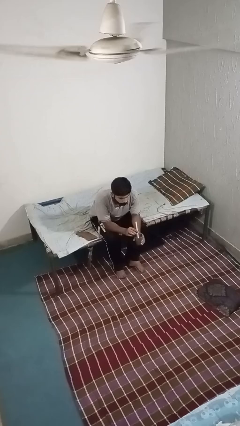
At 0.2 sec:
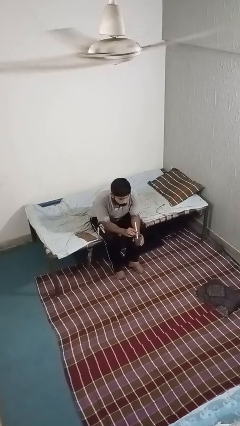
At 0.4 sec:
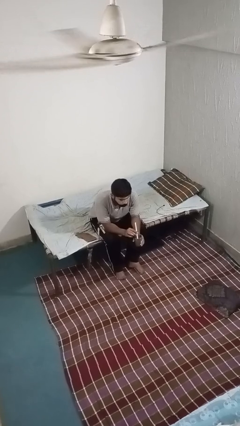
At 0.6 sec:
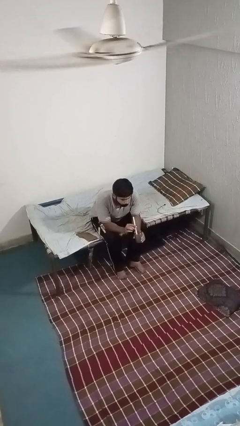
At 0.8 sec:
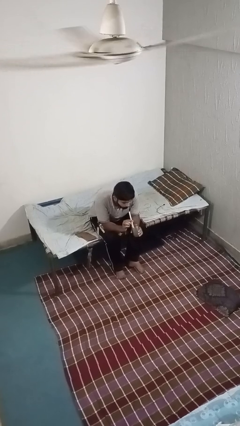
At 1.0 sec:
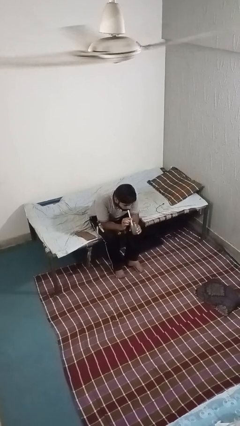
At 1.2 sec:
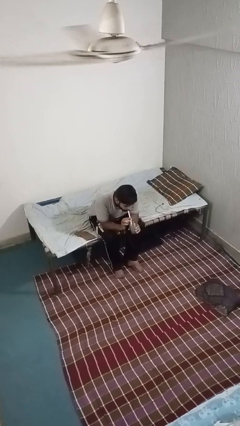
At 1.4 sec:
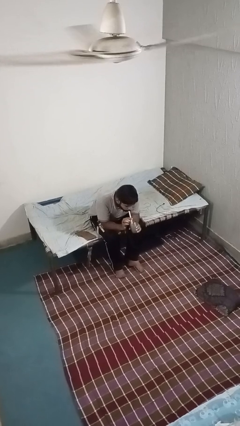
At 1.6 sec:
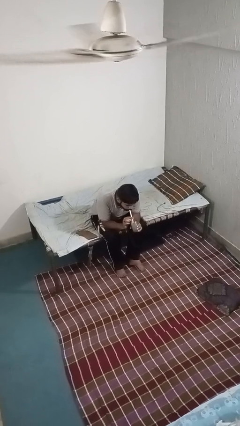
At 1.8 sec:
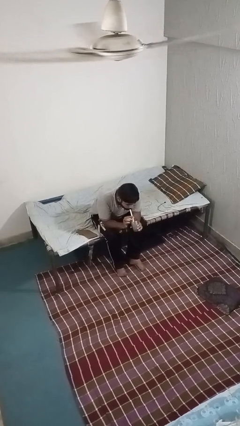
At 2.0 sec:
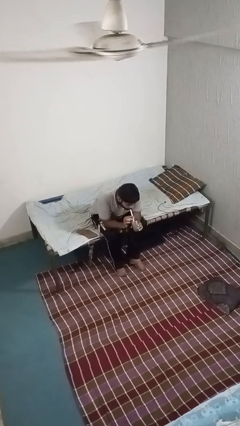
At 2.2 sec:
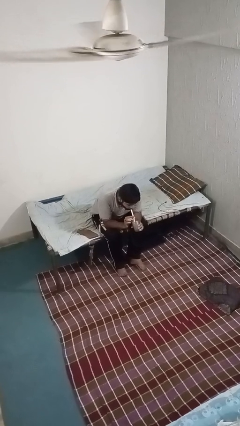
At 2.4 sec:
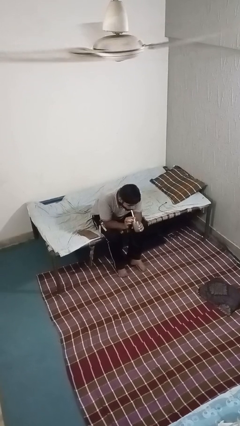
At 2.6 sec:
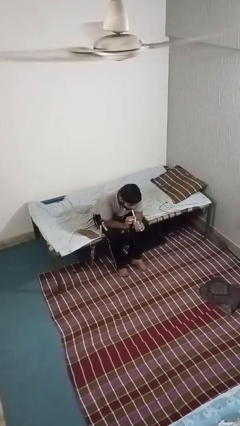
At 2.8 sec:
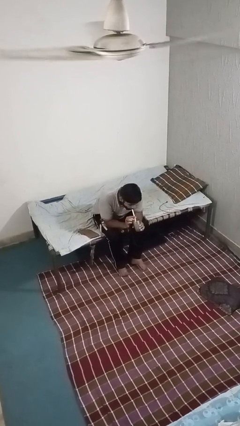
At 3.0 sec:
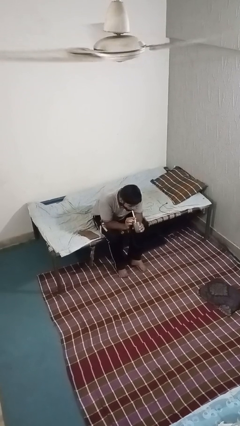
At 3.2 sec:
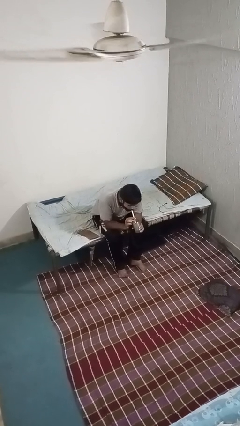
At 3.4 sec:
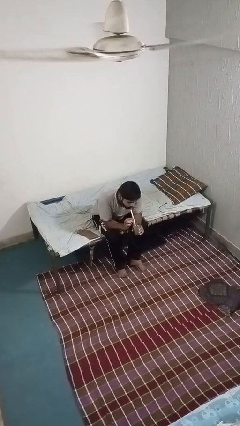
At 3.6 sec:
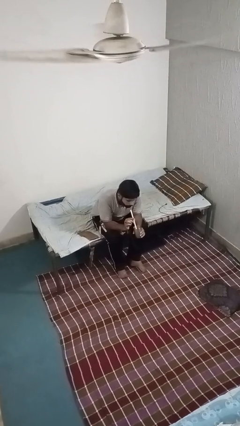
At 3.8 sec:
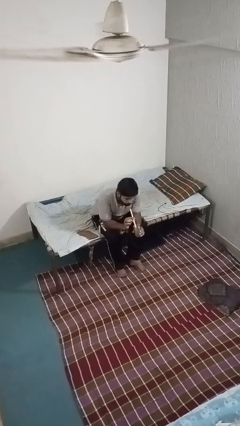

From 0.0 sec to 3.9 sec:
person drinks from straw

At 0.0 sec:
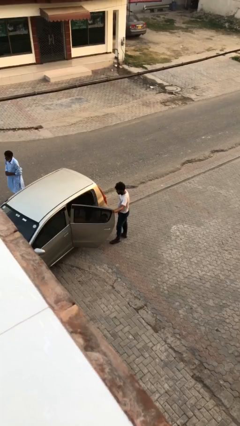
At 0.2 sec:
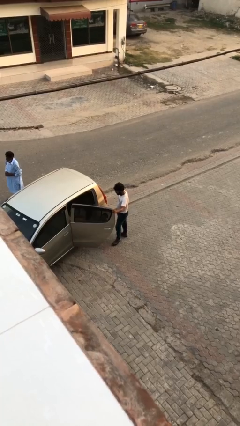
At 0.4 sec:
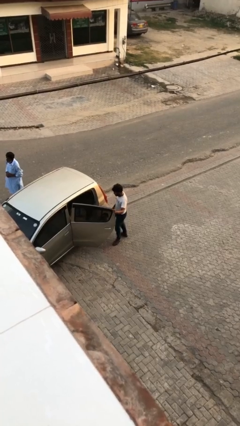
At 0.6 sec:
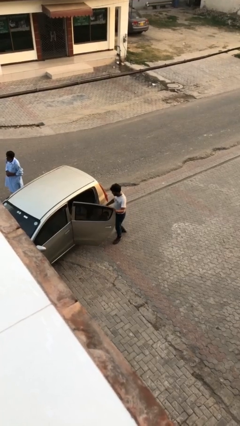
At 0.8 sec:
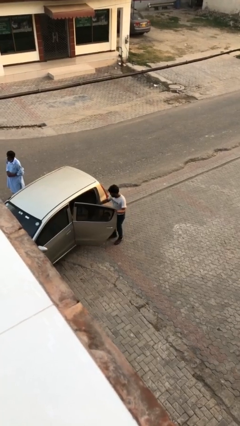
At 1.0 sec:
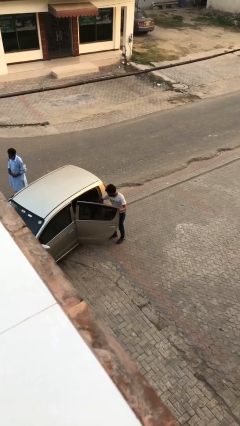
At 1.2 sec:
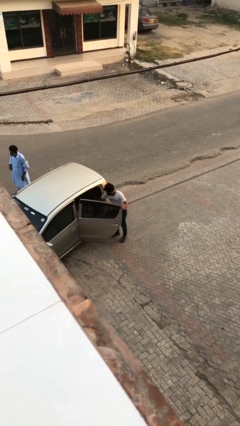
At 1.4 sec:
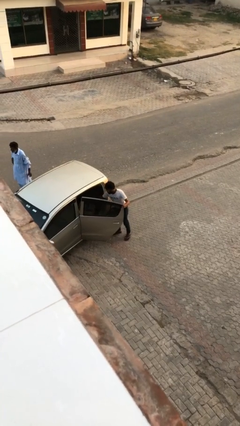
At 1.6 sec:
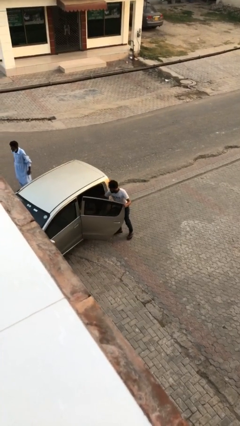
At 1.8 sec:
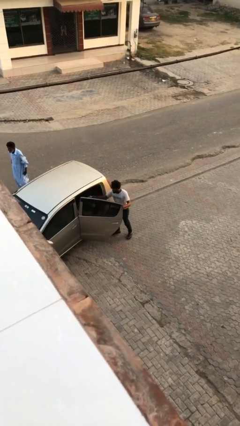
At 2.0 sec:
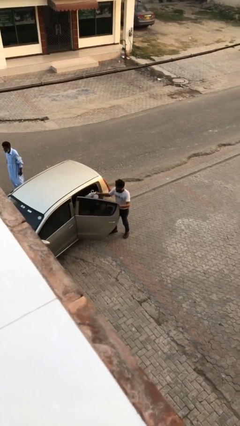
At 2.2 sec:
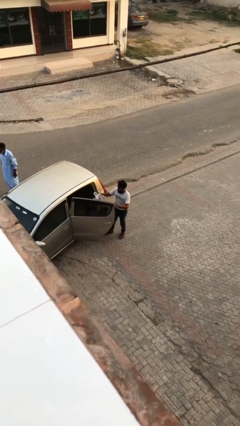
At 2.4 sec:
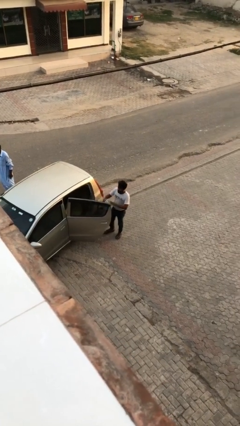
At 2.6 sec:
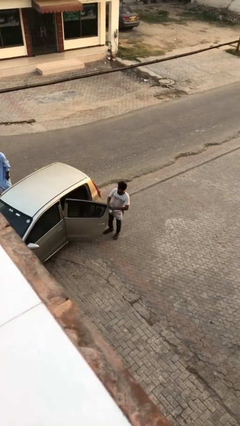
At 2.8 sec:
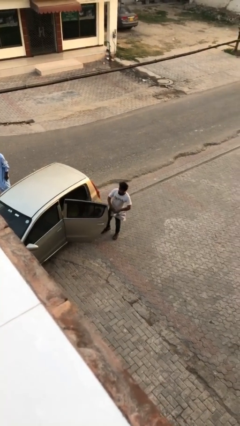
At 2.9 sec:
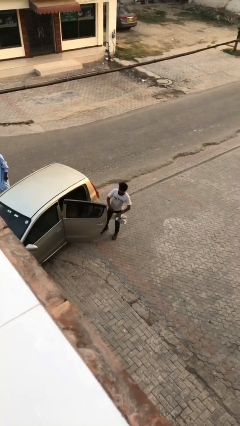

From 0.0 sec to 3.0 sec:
person unloads car

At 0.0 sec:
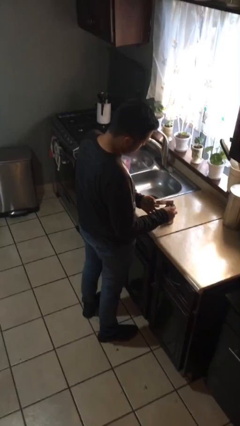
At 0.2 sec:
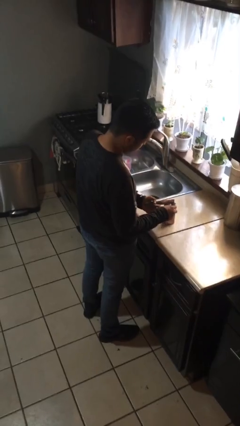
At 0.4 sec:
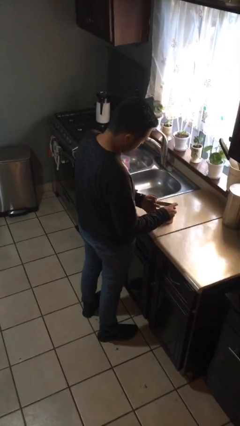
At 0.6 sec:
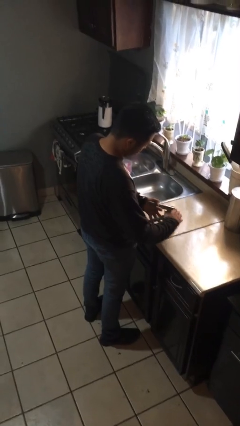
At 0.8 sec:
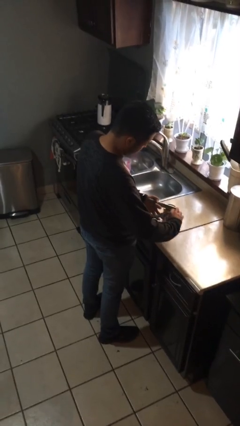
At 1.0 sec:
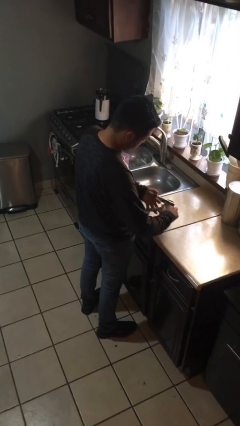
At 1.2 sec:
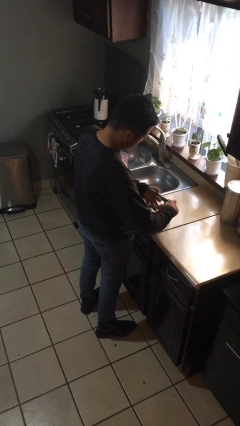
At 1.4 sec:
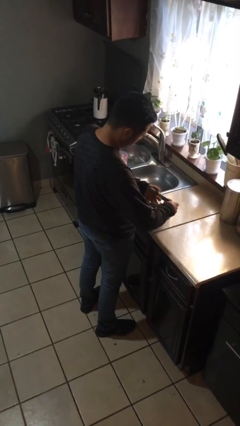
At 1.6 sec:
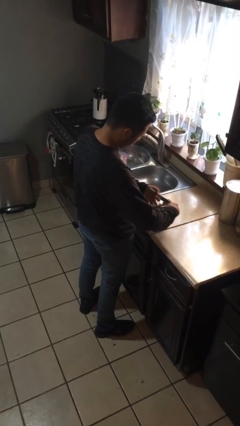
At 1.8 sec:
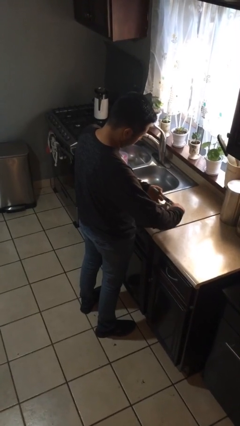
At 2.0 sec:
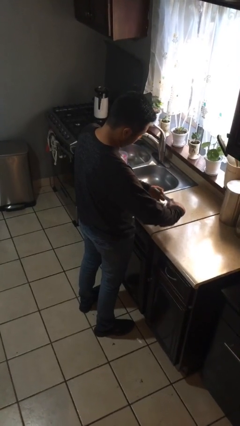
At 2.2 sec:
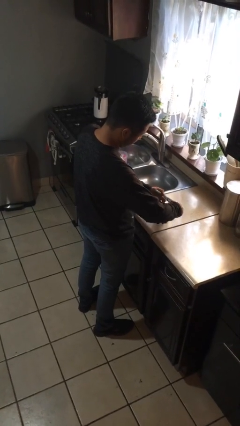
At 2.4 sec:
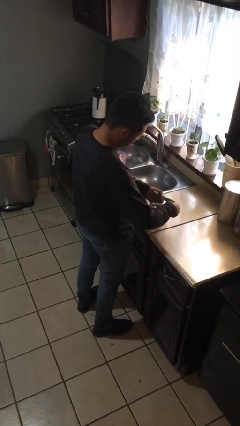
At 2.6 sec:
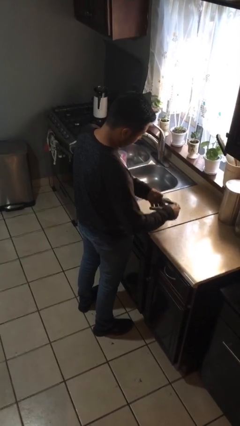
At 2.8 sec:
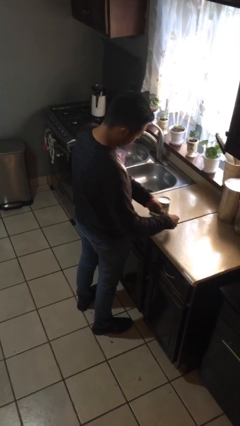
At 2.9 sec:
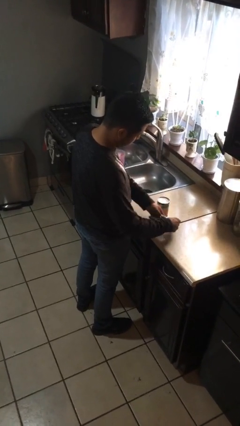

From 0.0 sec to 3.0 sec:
person opens can with can opener

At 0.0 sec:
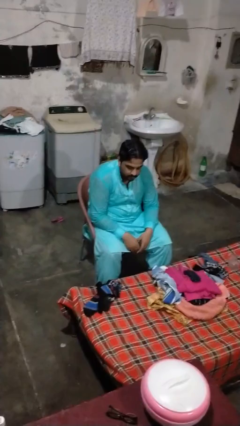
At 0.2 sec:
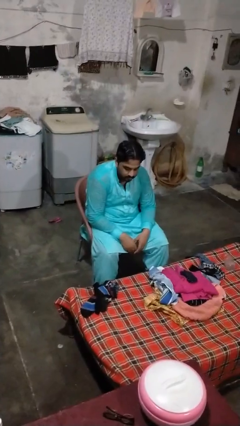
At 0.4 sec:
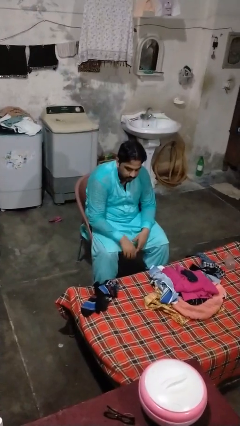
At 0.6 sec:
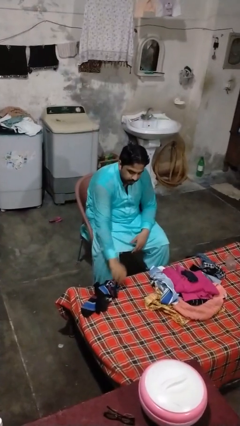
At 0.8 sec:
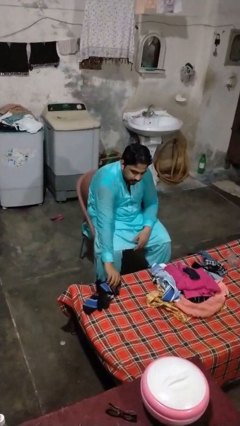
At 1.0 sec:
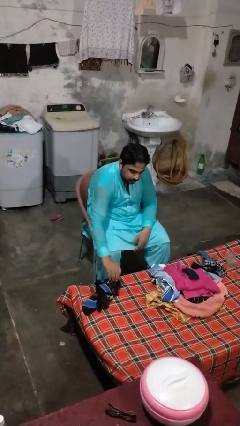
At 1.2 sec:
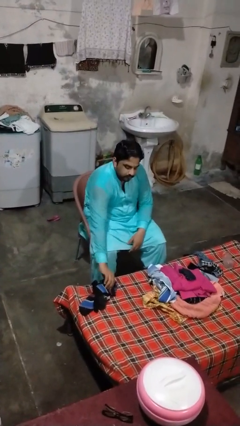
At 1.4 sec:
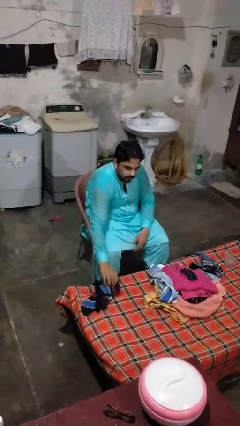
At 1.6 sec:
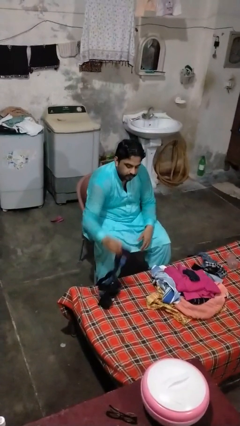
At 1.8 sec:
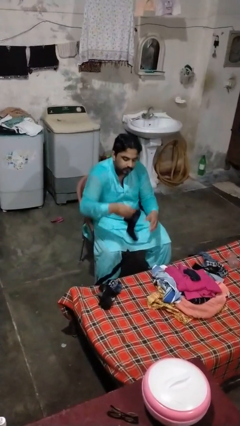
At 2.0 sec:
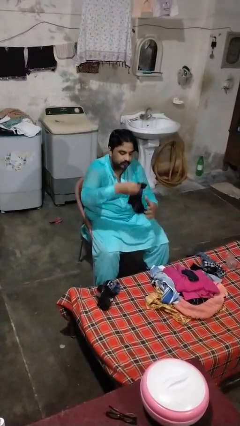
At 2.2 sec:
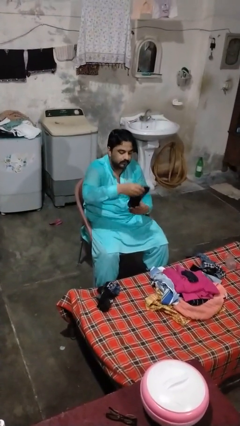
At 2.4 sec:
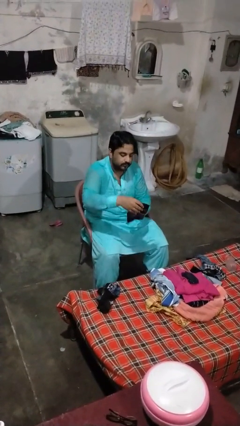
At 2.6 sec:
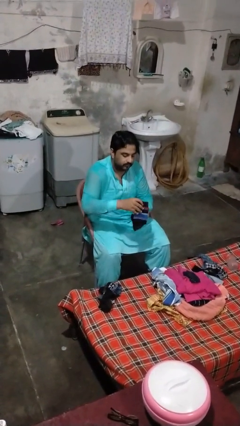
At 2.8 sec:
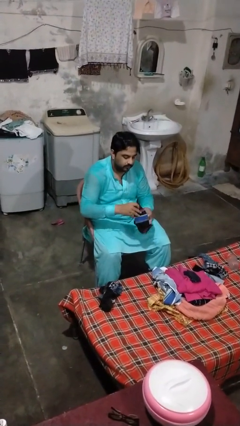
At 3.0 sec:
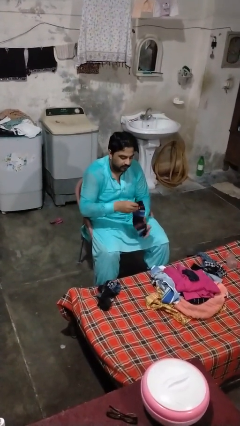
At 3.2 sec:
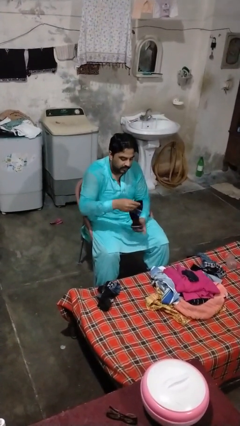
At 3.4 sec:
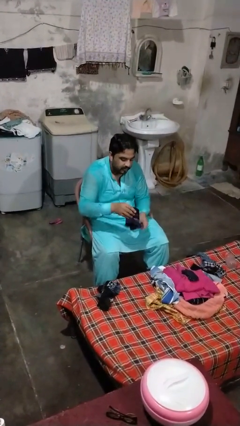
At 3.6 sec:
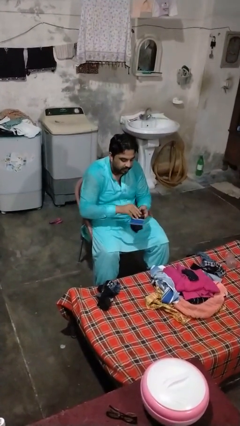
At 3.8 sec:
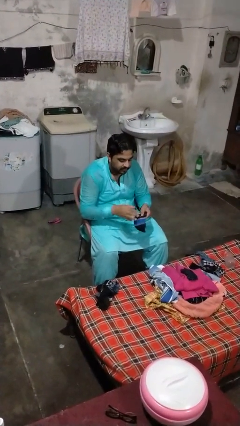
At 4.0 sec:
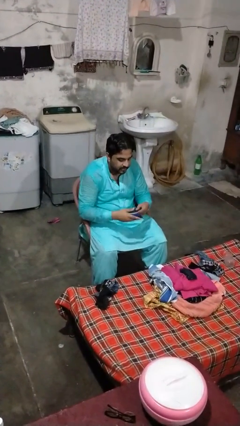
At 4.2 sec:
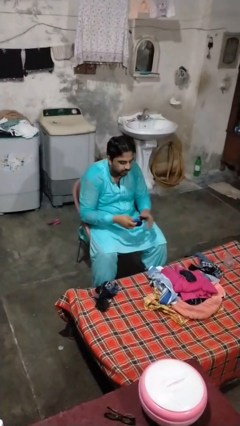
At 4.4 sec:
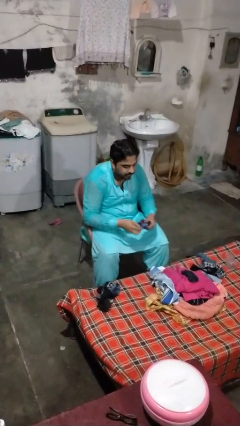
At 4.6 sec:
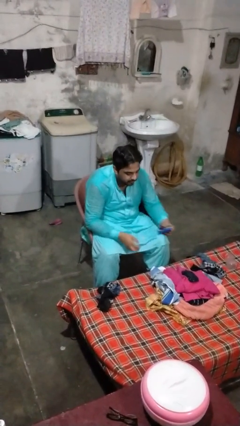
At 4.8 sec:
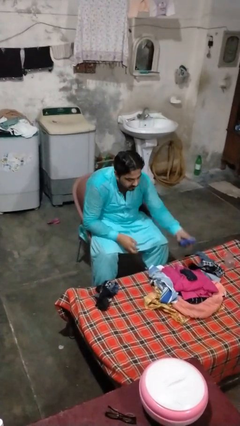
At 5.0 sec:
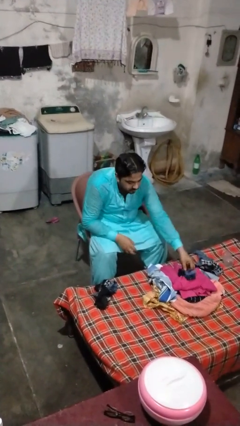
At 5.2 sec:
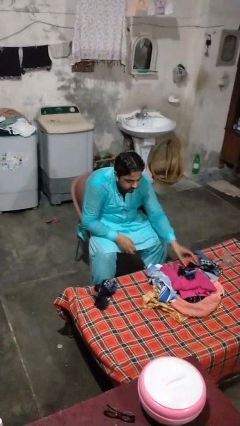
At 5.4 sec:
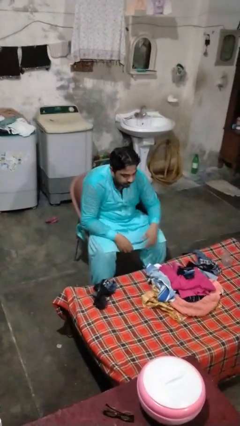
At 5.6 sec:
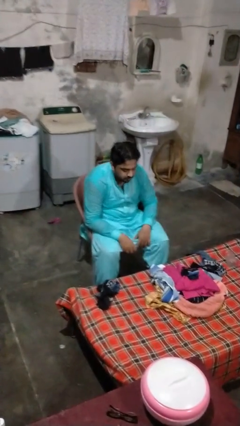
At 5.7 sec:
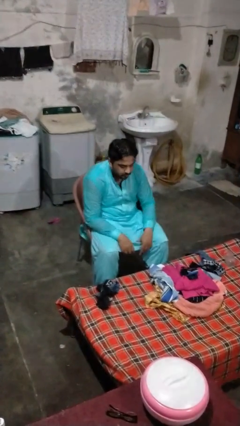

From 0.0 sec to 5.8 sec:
person folds socks

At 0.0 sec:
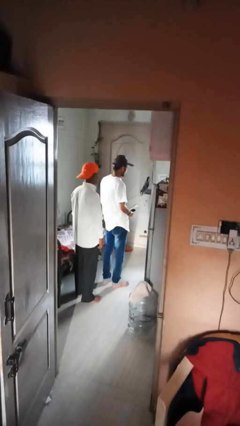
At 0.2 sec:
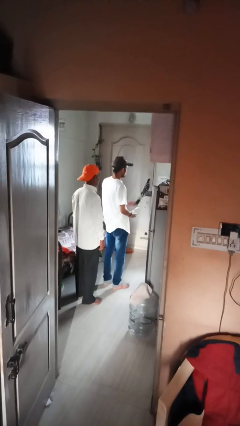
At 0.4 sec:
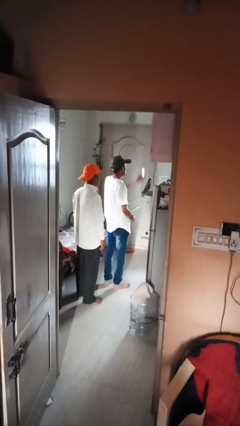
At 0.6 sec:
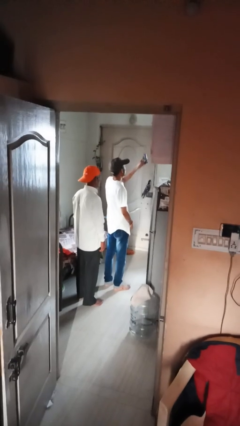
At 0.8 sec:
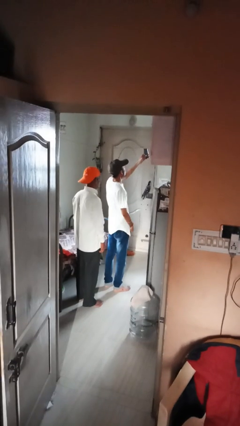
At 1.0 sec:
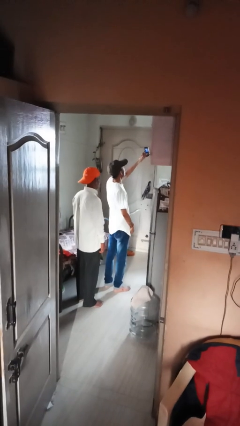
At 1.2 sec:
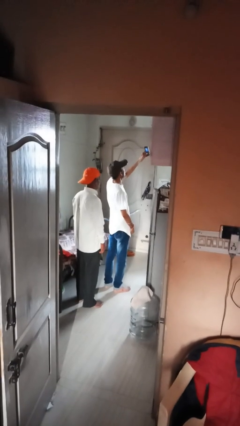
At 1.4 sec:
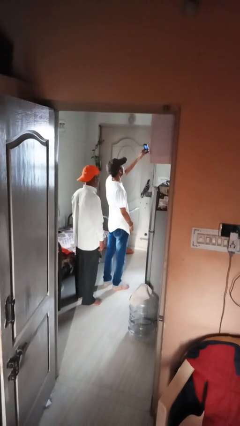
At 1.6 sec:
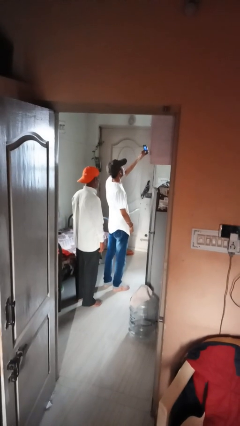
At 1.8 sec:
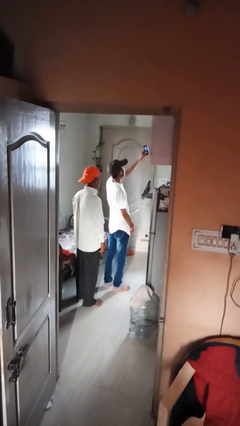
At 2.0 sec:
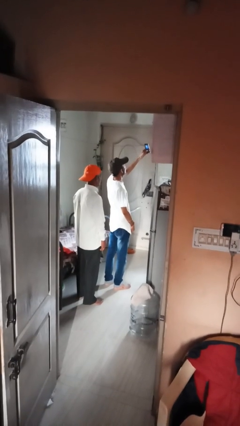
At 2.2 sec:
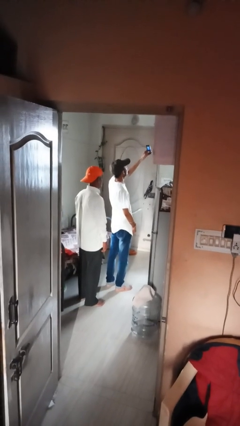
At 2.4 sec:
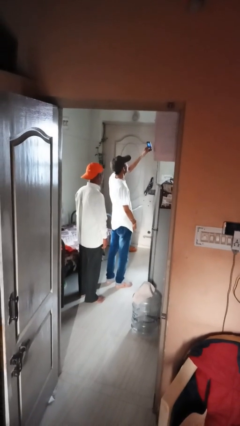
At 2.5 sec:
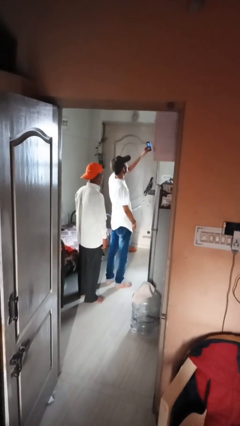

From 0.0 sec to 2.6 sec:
person takes selfie with person
